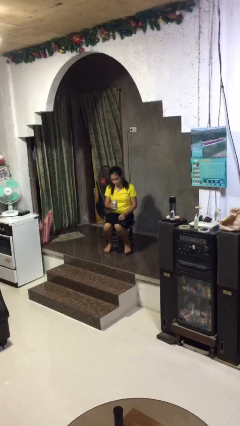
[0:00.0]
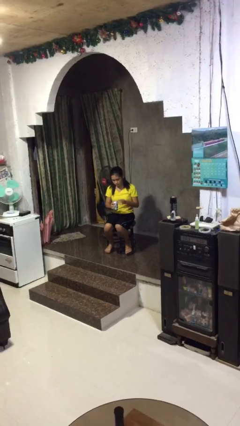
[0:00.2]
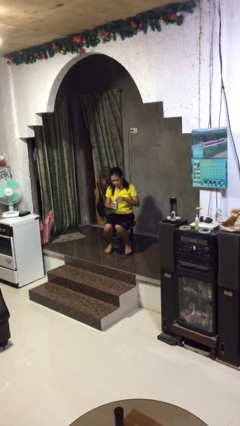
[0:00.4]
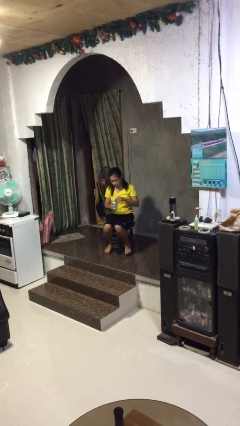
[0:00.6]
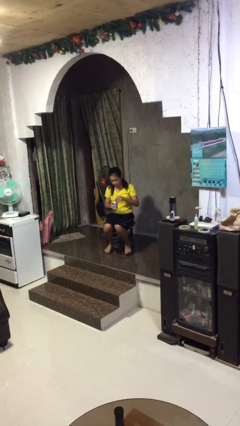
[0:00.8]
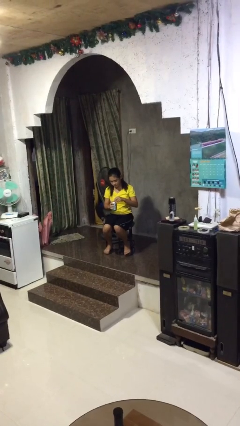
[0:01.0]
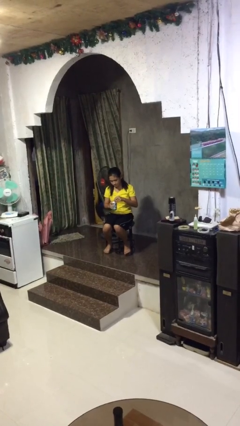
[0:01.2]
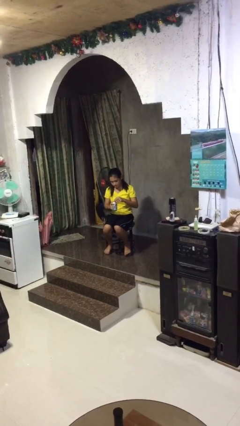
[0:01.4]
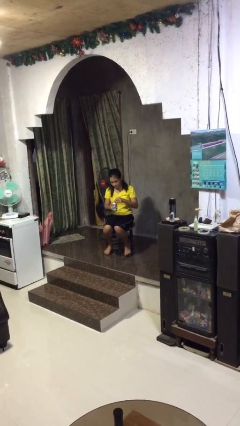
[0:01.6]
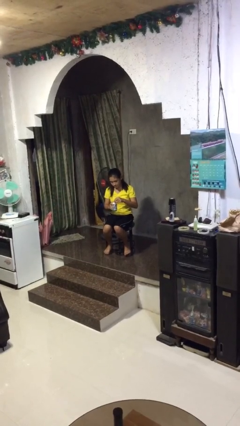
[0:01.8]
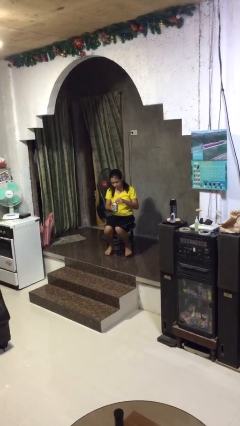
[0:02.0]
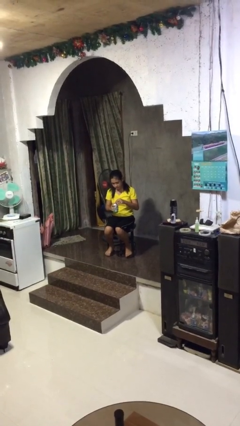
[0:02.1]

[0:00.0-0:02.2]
person opens beverage can

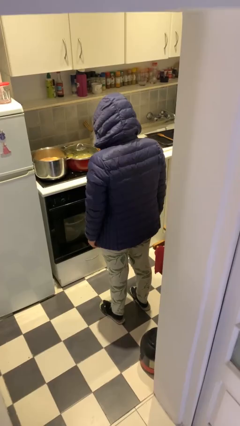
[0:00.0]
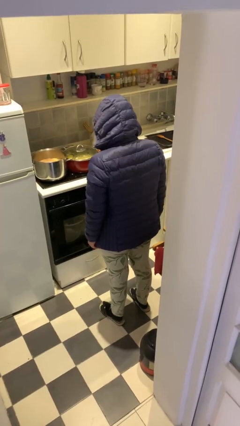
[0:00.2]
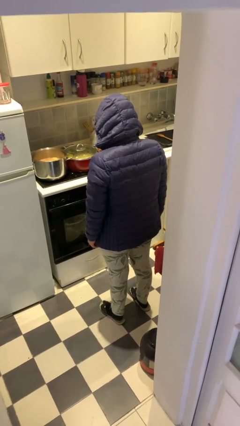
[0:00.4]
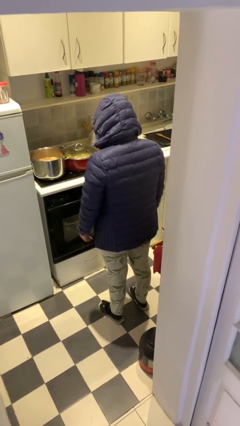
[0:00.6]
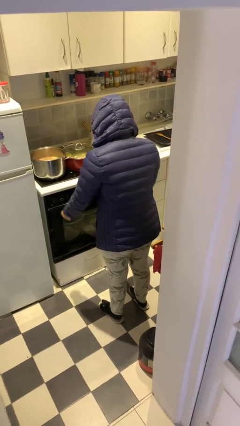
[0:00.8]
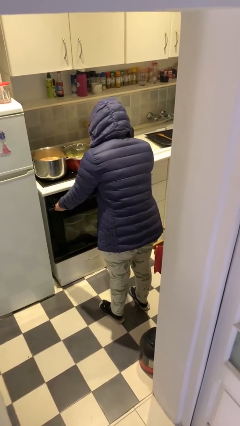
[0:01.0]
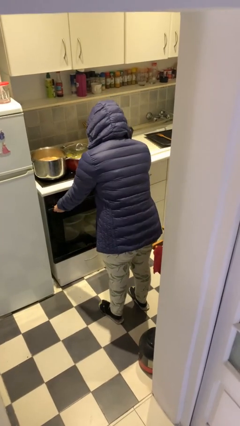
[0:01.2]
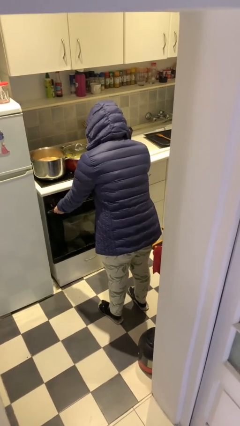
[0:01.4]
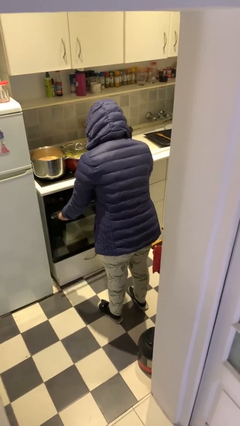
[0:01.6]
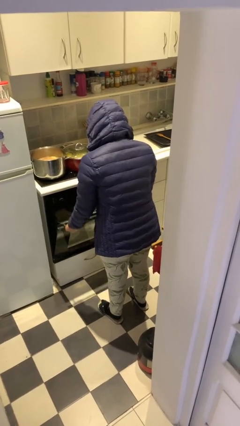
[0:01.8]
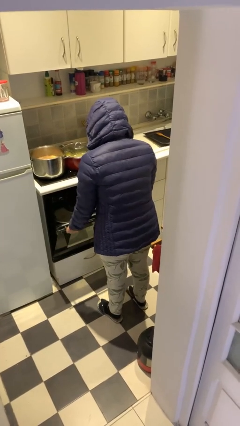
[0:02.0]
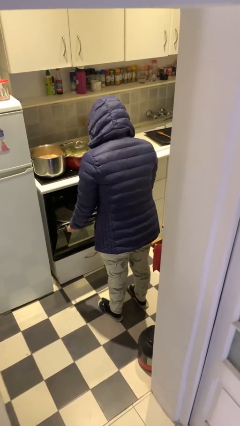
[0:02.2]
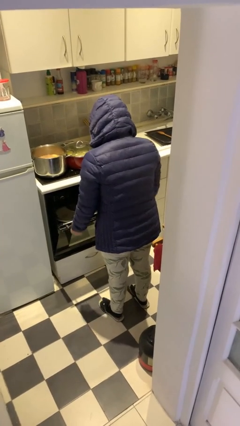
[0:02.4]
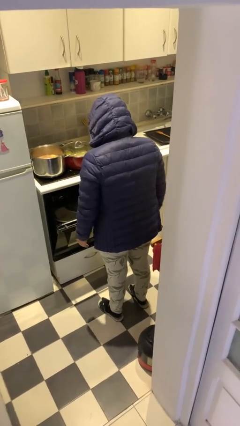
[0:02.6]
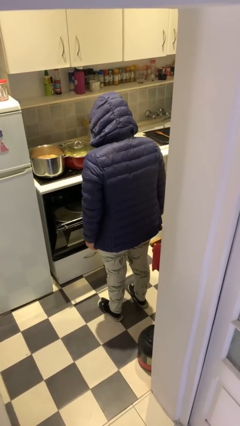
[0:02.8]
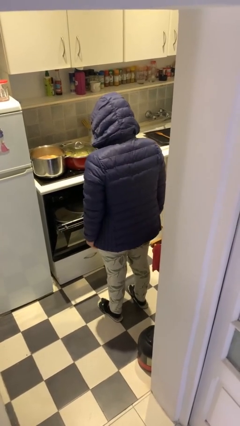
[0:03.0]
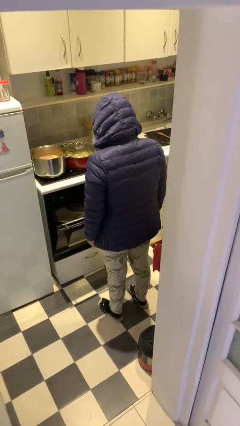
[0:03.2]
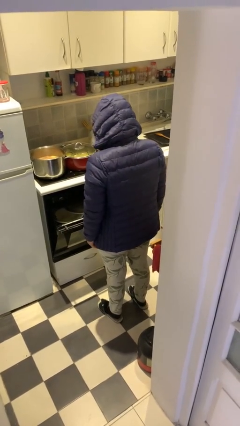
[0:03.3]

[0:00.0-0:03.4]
person opens dishwasher

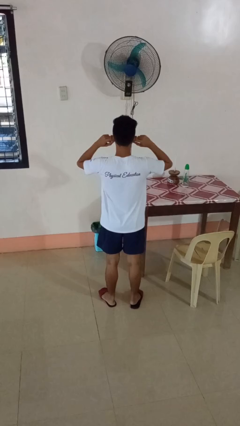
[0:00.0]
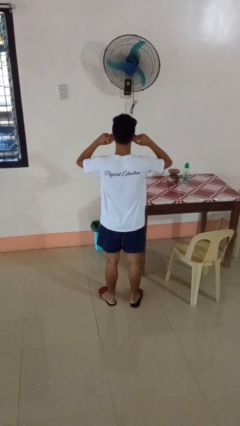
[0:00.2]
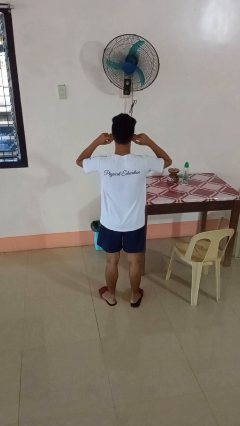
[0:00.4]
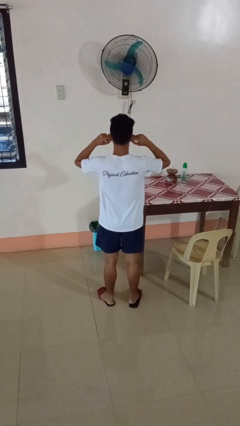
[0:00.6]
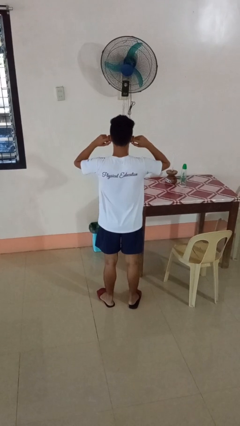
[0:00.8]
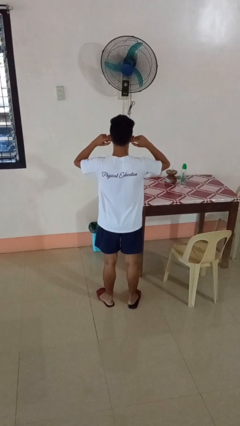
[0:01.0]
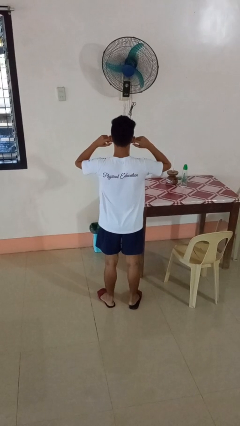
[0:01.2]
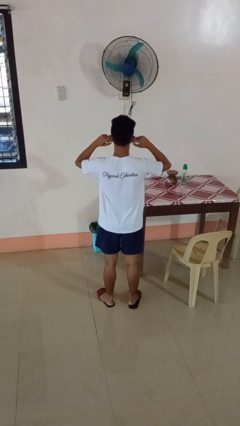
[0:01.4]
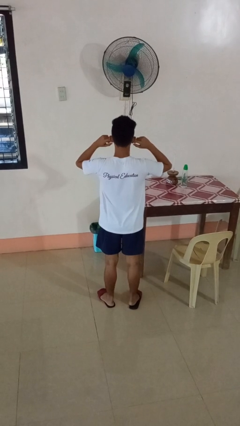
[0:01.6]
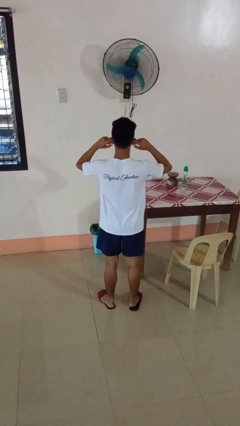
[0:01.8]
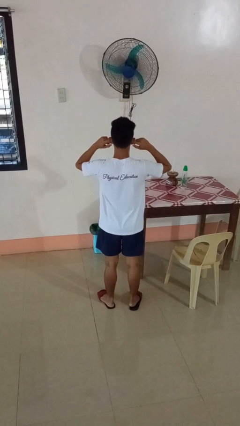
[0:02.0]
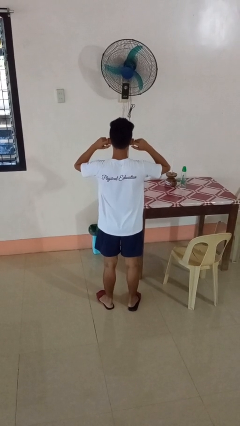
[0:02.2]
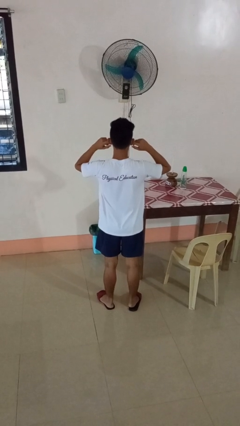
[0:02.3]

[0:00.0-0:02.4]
person puts fingers in ear

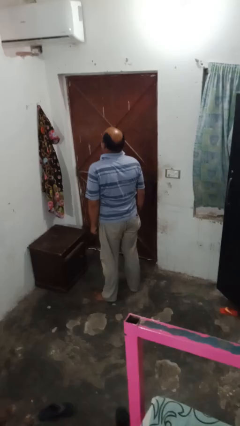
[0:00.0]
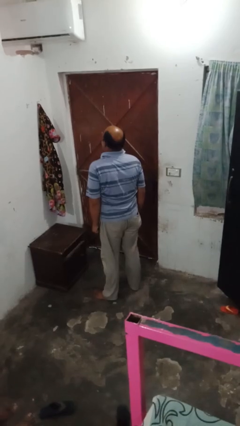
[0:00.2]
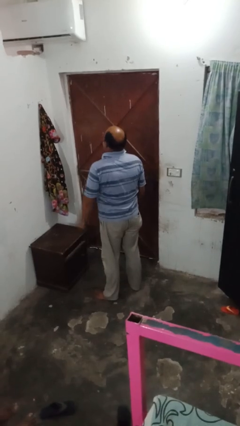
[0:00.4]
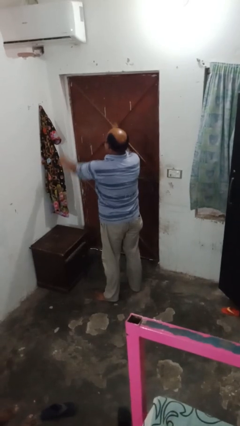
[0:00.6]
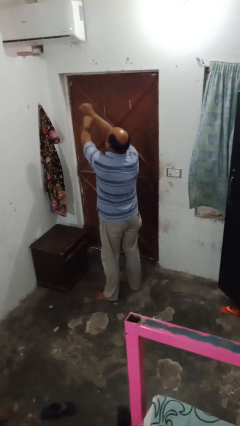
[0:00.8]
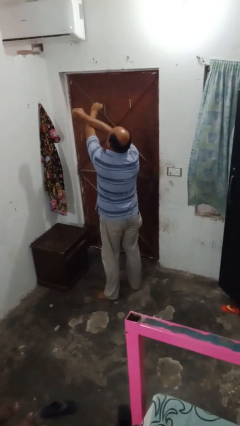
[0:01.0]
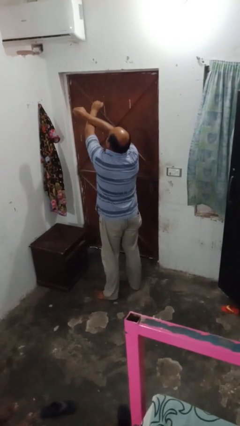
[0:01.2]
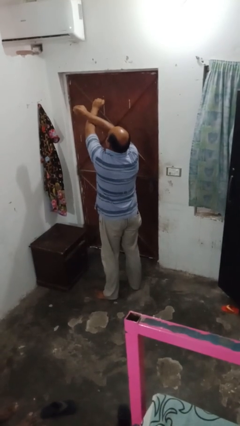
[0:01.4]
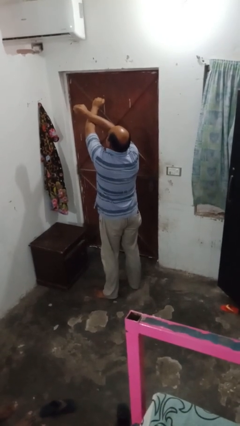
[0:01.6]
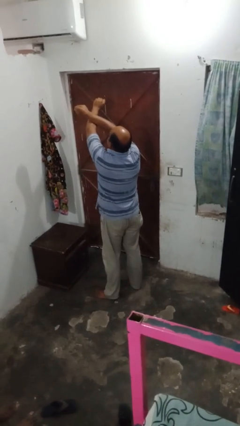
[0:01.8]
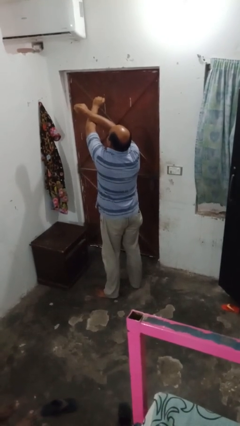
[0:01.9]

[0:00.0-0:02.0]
person gestures arms x

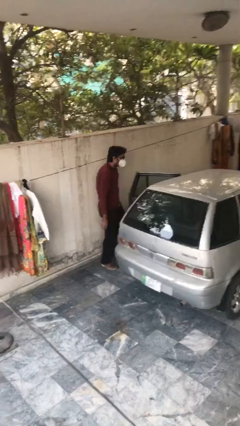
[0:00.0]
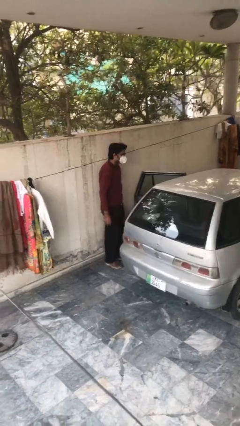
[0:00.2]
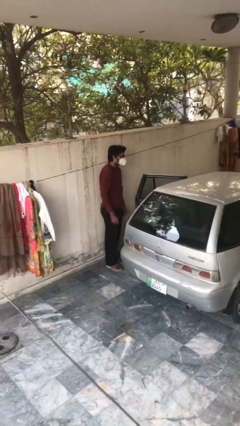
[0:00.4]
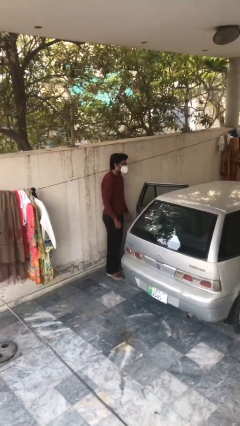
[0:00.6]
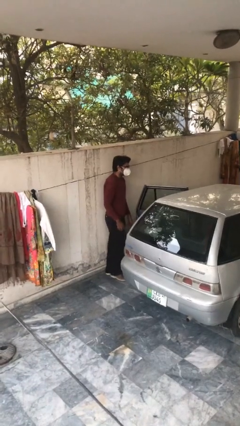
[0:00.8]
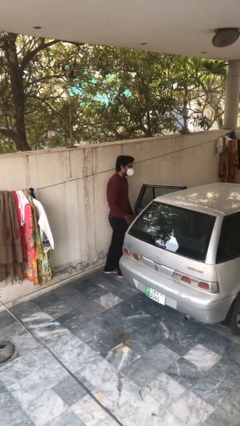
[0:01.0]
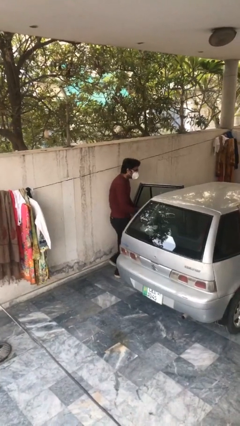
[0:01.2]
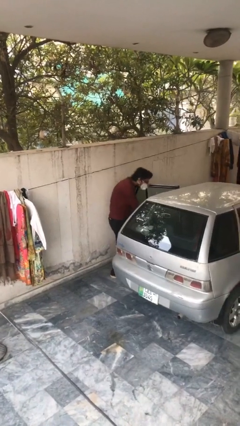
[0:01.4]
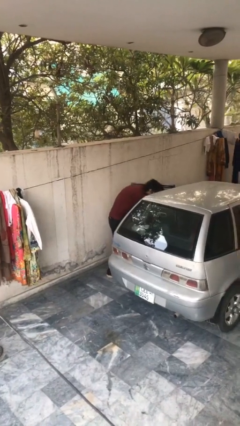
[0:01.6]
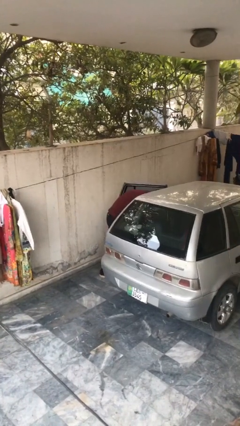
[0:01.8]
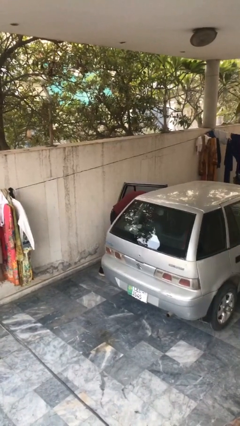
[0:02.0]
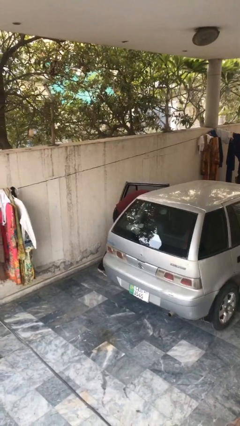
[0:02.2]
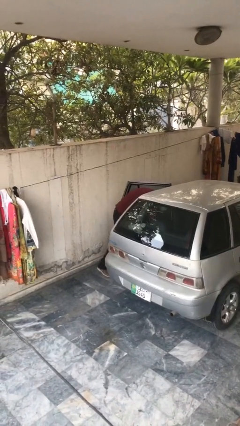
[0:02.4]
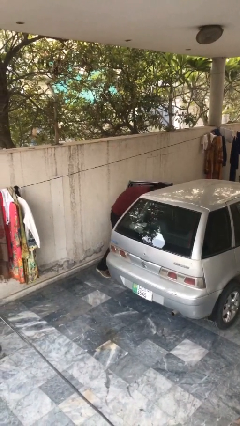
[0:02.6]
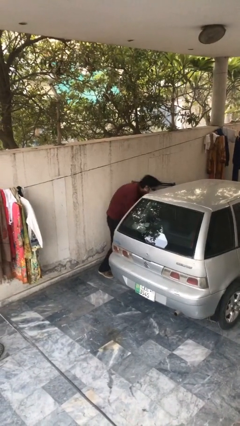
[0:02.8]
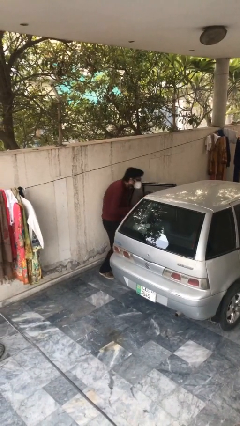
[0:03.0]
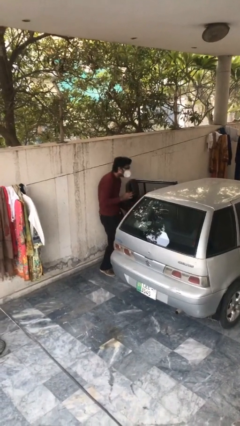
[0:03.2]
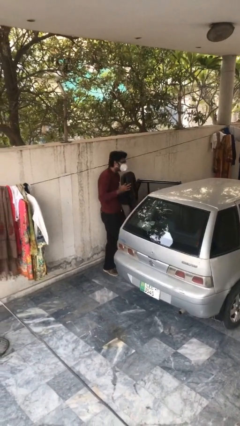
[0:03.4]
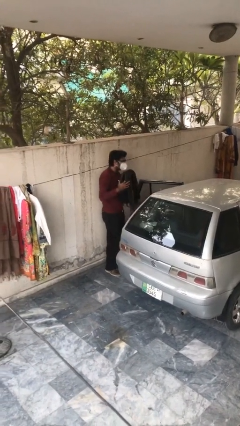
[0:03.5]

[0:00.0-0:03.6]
person unloads car

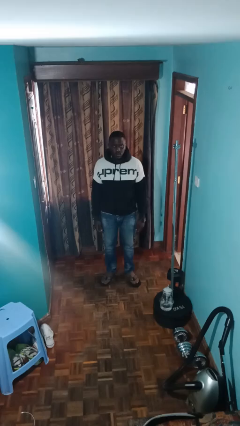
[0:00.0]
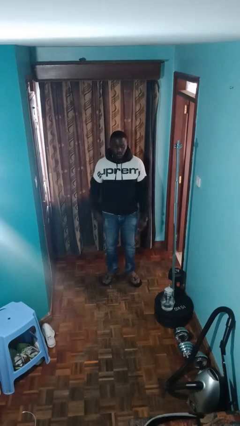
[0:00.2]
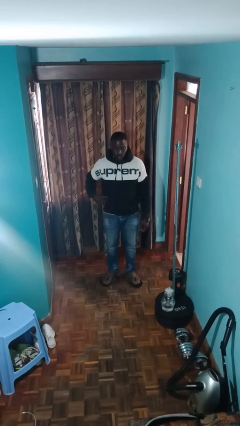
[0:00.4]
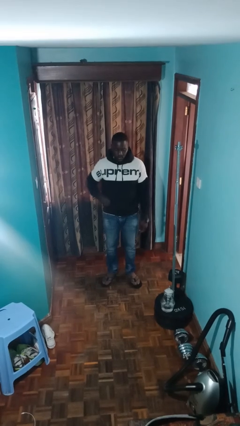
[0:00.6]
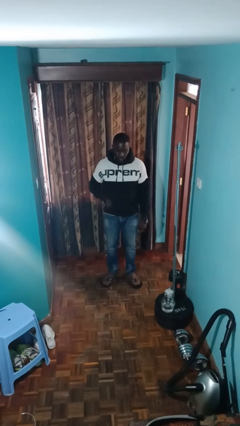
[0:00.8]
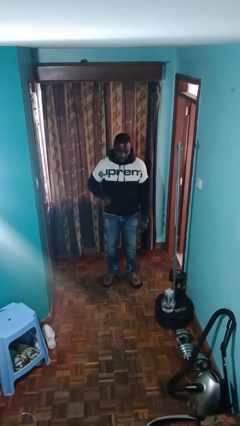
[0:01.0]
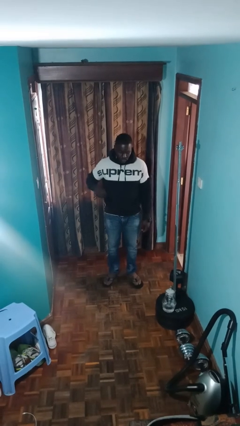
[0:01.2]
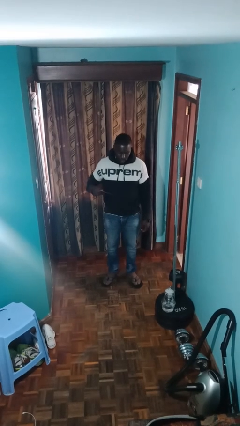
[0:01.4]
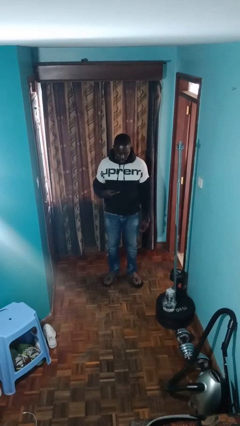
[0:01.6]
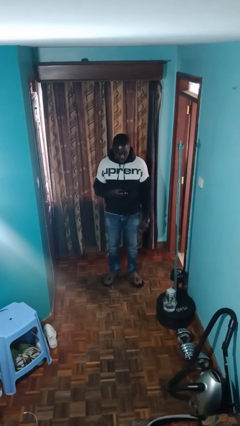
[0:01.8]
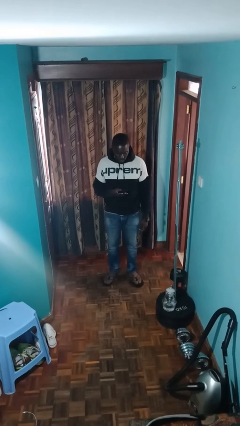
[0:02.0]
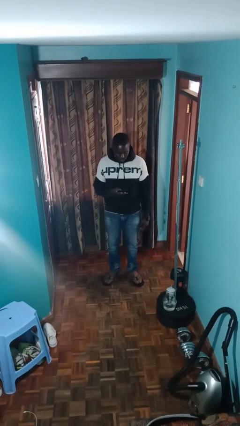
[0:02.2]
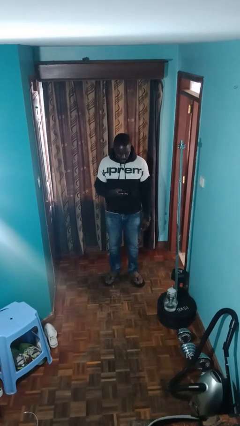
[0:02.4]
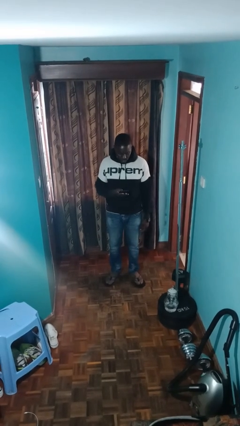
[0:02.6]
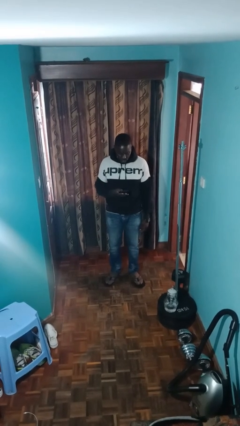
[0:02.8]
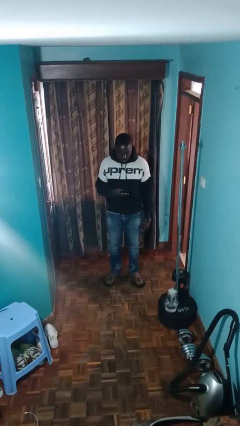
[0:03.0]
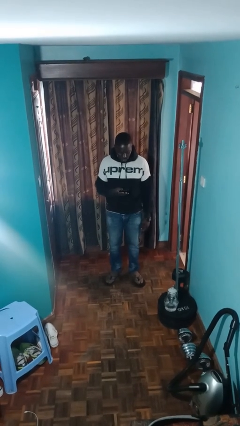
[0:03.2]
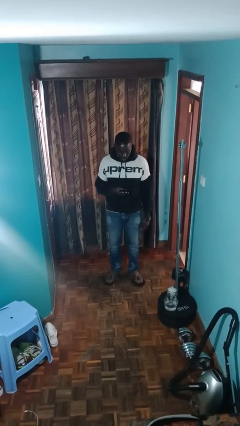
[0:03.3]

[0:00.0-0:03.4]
person takes phone from pocket

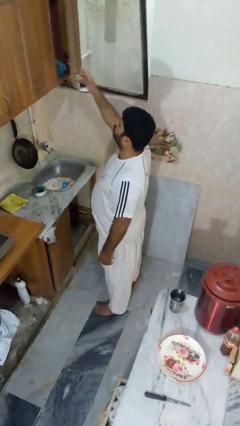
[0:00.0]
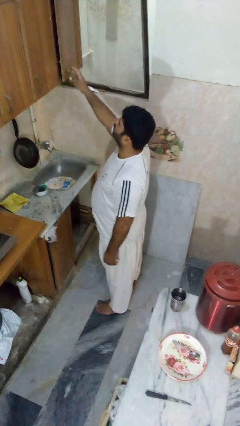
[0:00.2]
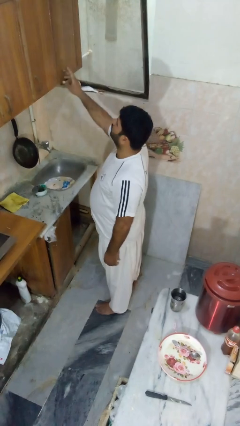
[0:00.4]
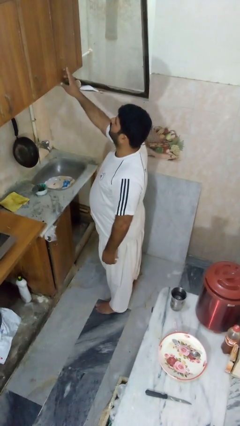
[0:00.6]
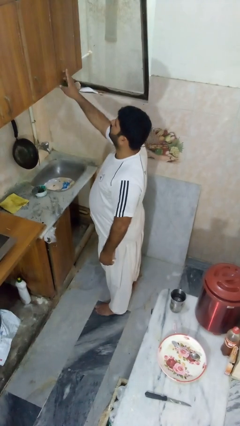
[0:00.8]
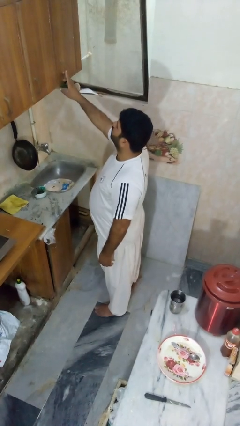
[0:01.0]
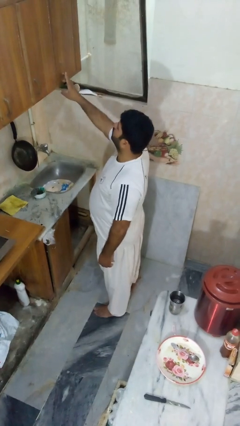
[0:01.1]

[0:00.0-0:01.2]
person closes cabinet
